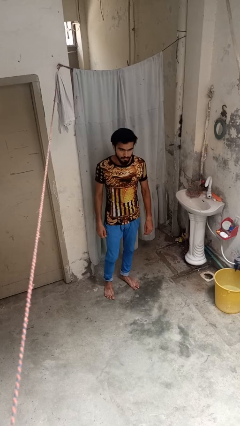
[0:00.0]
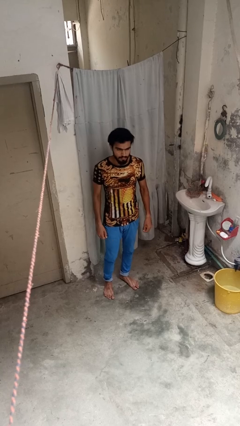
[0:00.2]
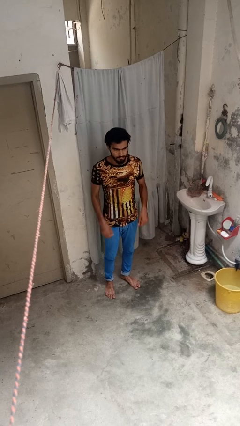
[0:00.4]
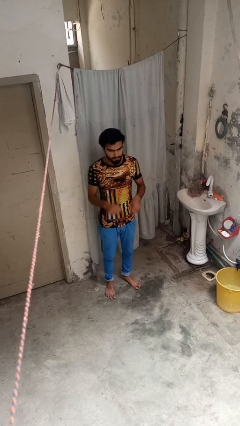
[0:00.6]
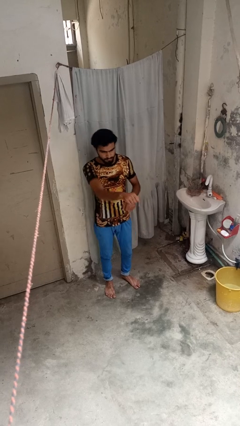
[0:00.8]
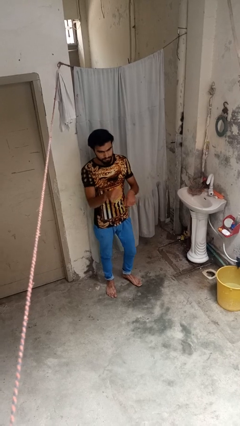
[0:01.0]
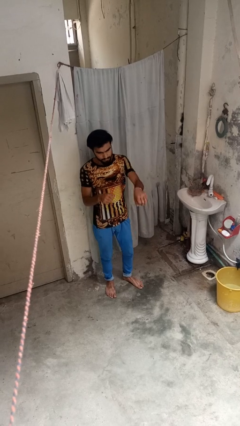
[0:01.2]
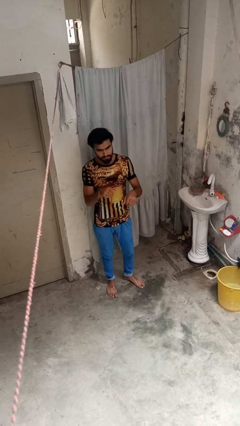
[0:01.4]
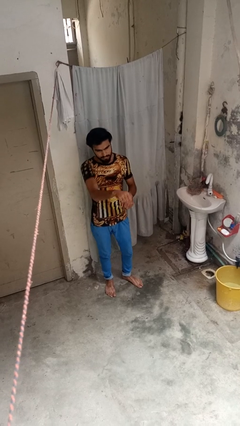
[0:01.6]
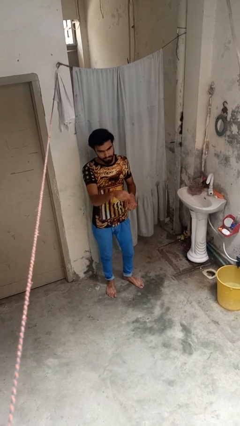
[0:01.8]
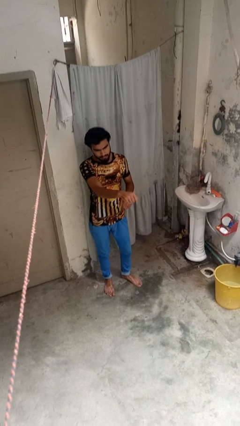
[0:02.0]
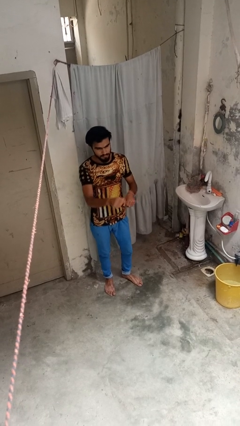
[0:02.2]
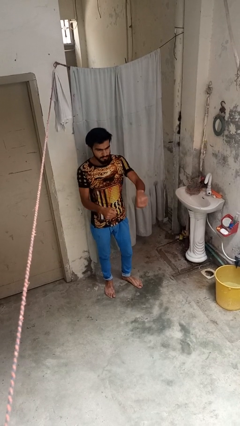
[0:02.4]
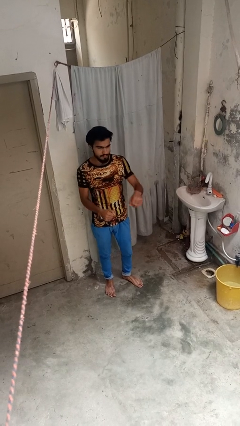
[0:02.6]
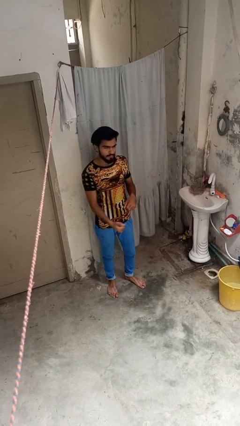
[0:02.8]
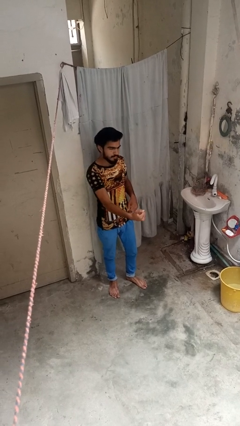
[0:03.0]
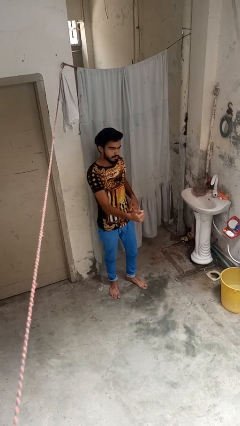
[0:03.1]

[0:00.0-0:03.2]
person punches

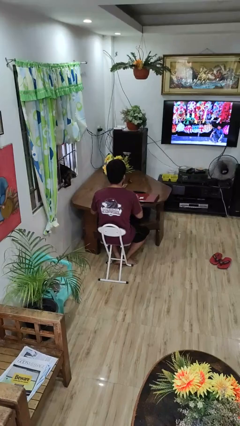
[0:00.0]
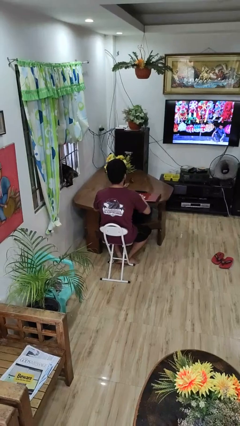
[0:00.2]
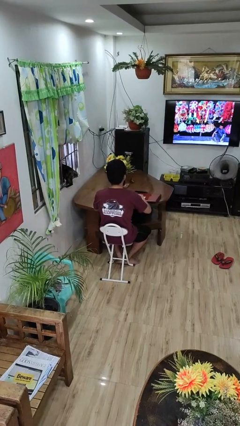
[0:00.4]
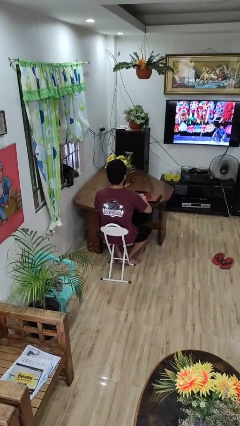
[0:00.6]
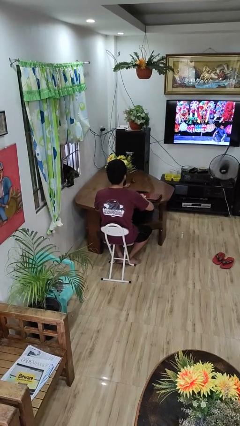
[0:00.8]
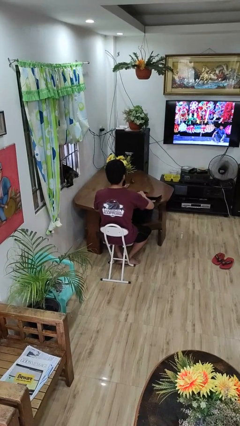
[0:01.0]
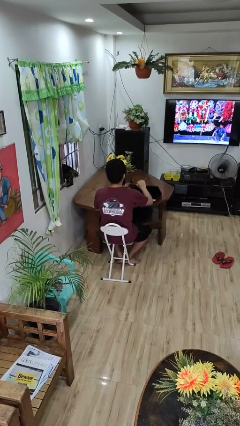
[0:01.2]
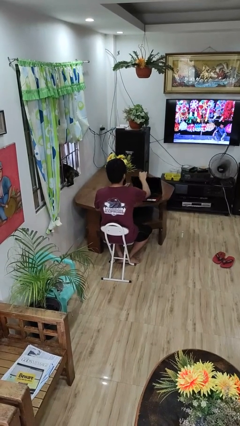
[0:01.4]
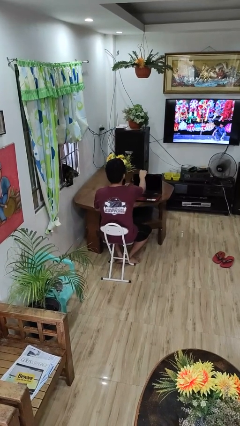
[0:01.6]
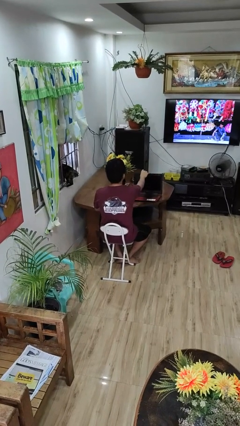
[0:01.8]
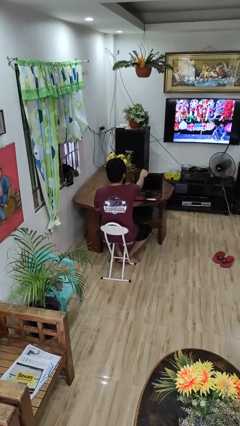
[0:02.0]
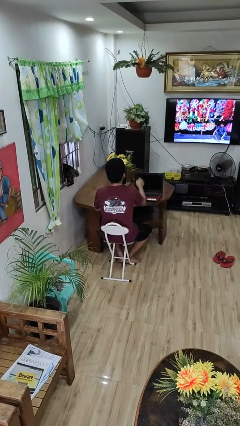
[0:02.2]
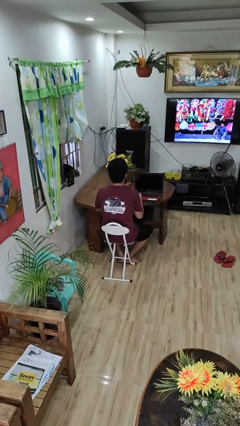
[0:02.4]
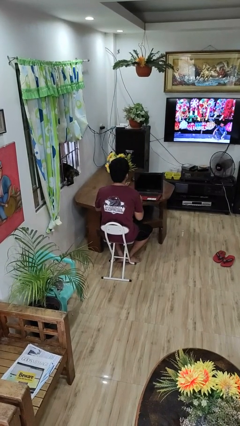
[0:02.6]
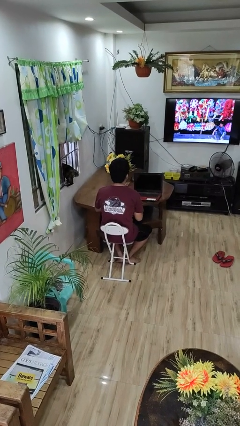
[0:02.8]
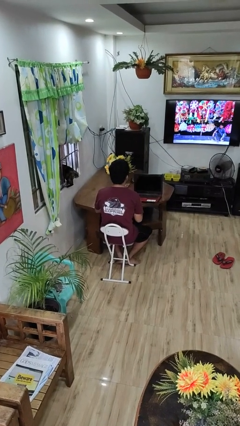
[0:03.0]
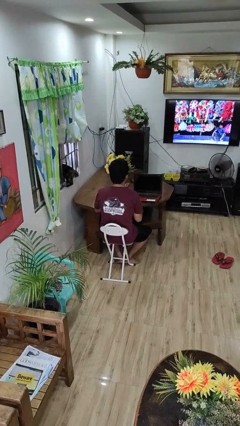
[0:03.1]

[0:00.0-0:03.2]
person opens laptop

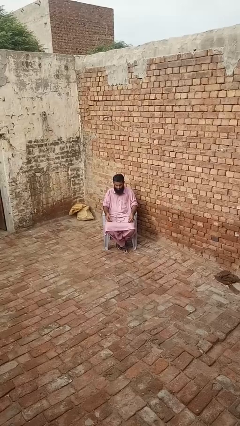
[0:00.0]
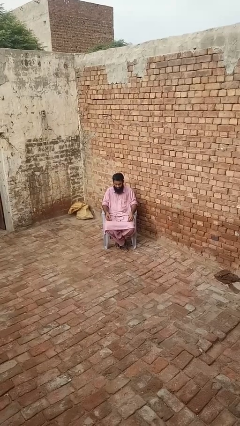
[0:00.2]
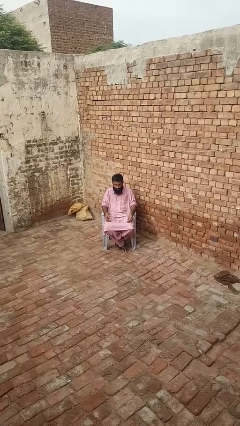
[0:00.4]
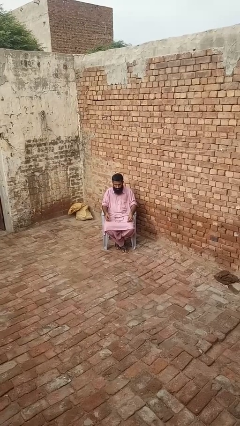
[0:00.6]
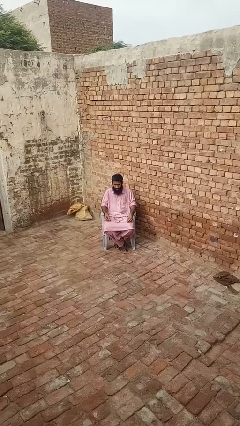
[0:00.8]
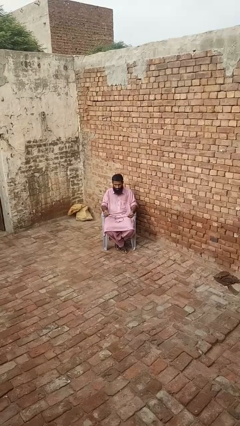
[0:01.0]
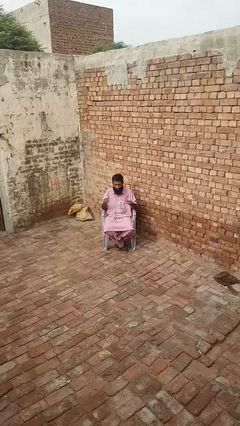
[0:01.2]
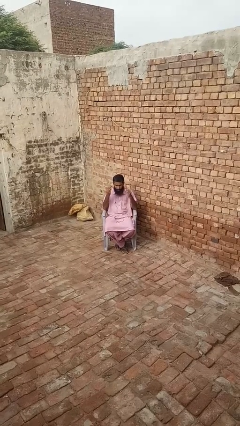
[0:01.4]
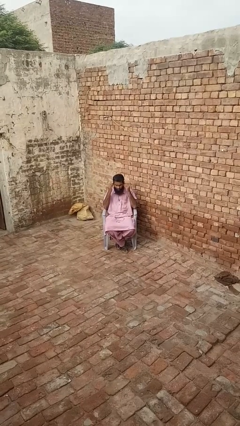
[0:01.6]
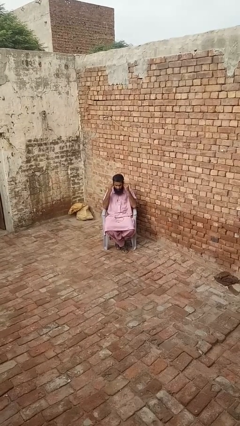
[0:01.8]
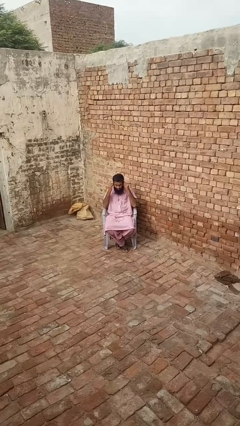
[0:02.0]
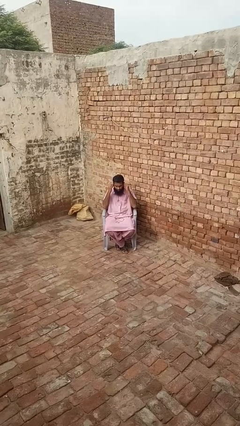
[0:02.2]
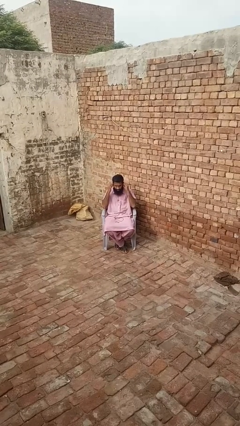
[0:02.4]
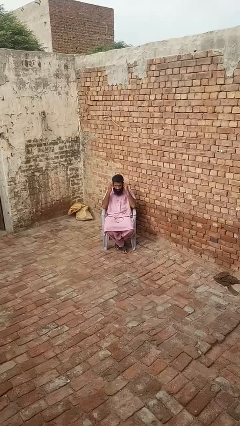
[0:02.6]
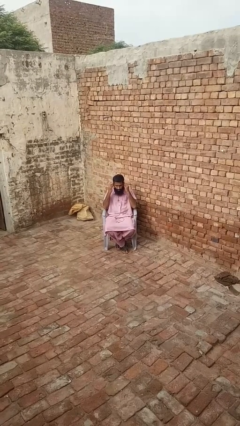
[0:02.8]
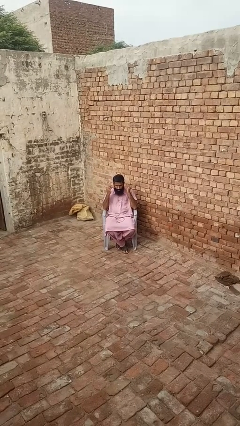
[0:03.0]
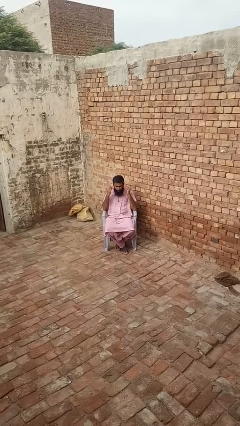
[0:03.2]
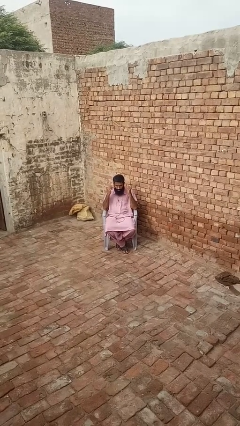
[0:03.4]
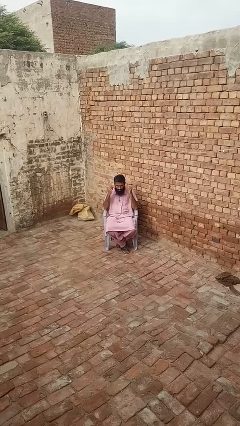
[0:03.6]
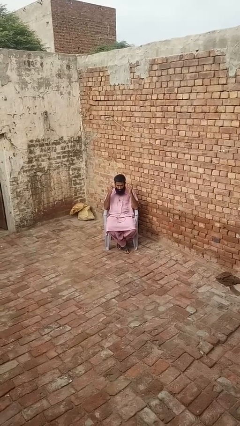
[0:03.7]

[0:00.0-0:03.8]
person puts on headphones

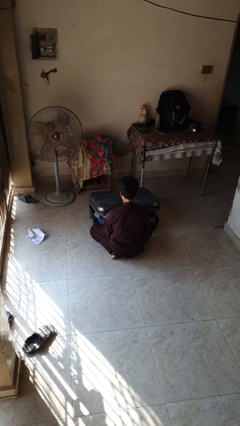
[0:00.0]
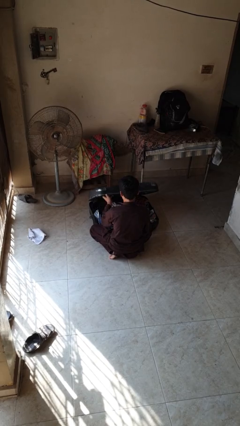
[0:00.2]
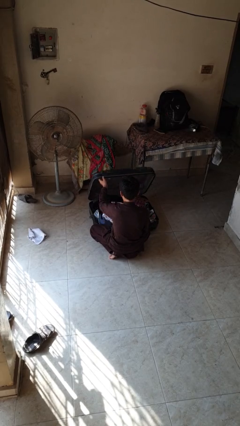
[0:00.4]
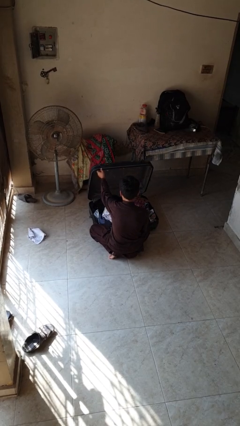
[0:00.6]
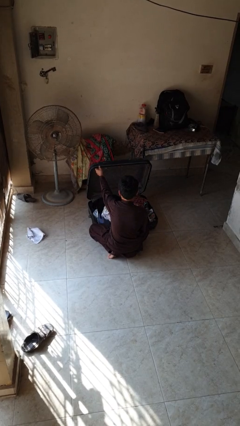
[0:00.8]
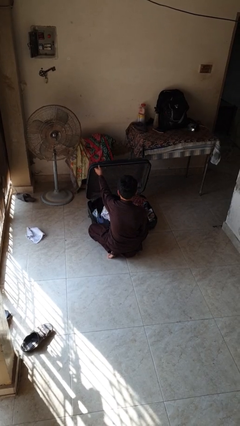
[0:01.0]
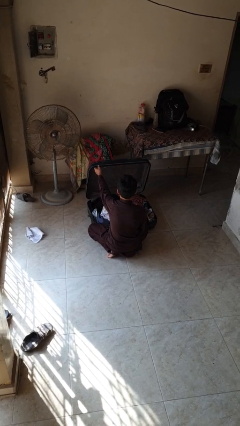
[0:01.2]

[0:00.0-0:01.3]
person opens suitcase

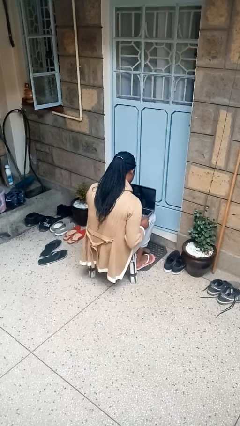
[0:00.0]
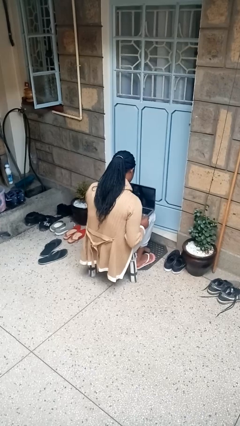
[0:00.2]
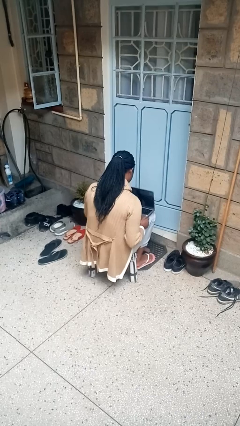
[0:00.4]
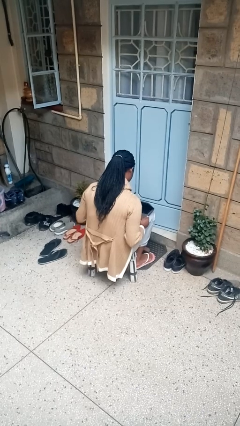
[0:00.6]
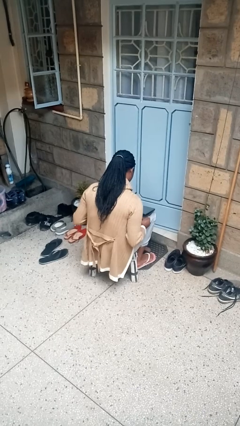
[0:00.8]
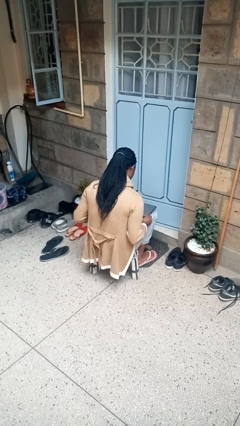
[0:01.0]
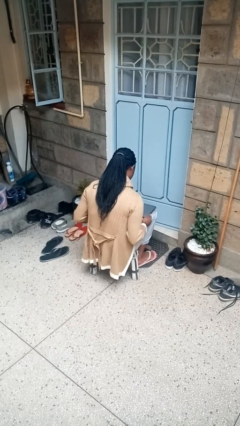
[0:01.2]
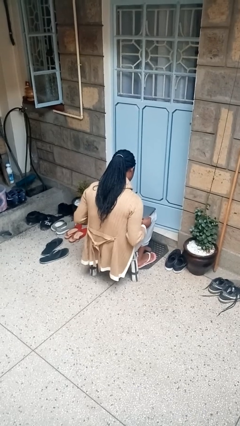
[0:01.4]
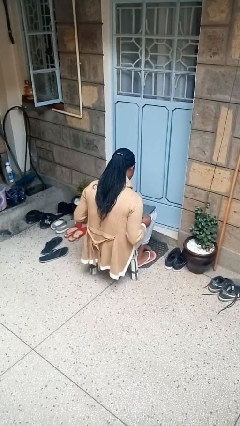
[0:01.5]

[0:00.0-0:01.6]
person closes laptop

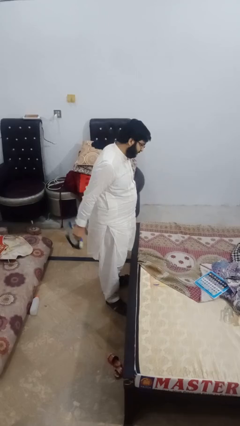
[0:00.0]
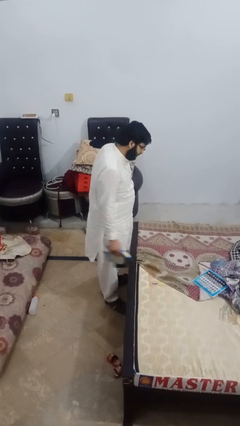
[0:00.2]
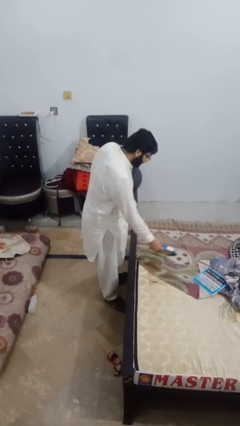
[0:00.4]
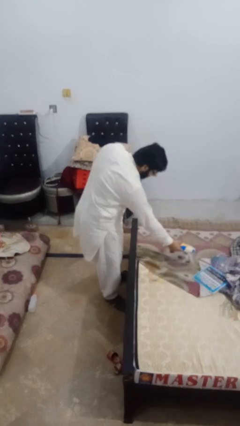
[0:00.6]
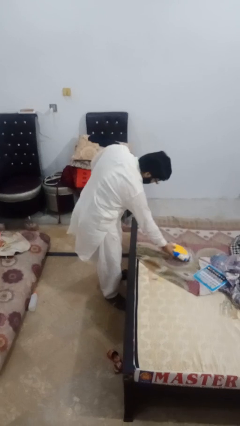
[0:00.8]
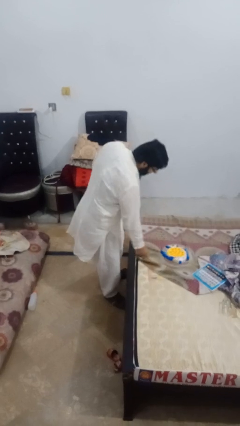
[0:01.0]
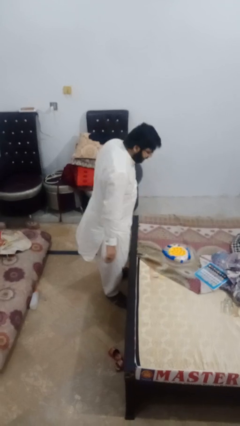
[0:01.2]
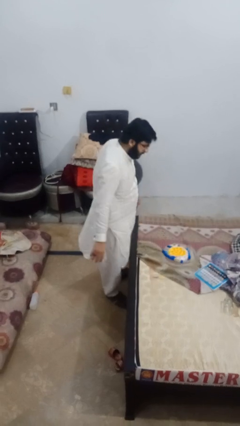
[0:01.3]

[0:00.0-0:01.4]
person puts down object on bed

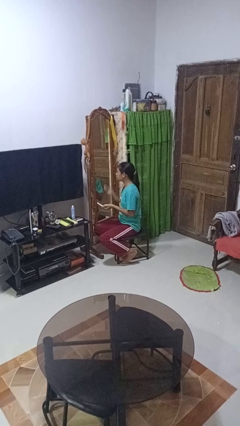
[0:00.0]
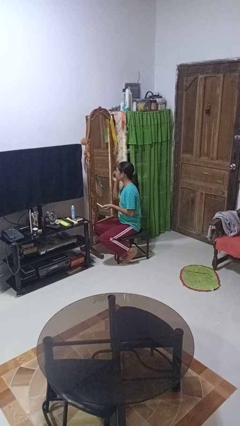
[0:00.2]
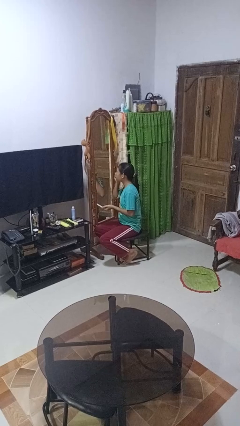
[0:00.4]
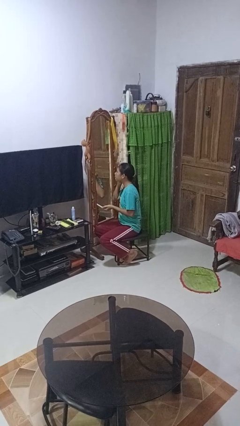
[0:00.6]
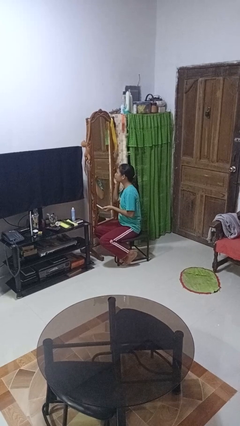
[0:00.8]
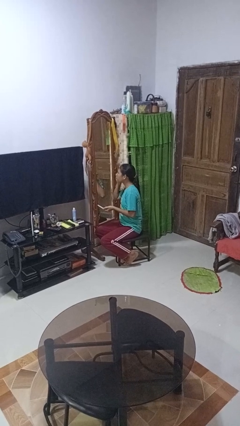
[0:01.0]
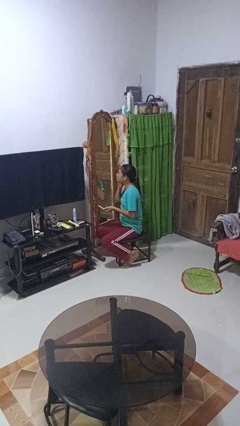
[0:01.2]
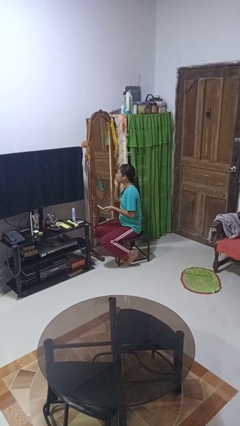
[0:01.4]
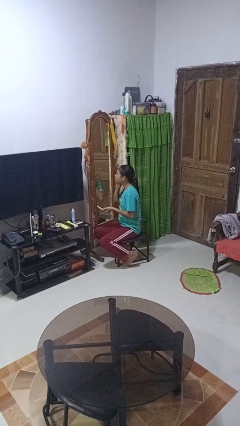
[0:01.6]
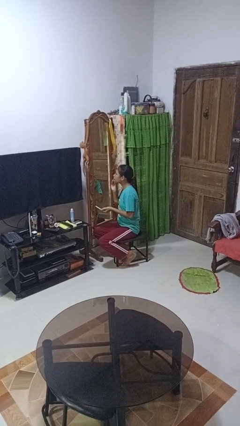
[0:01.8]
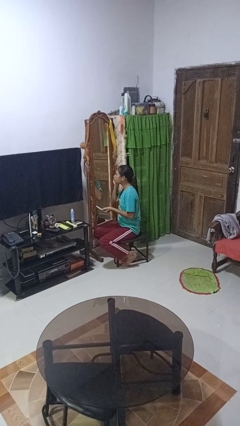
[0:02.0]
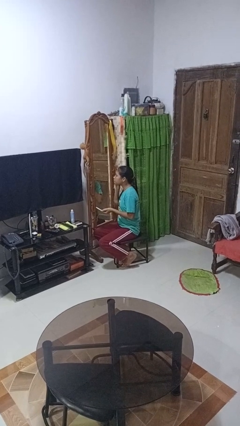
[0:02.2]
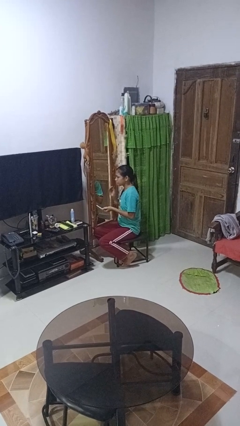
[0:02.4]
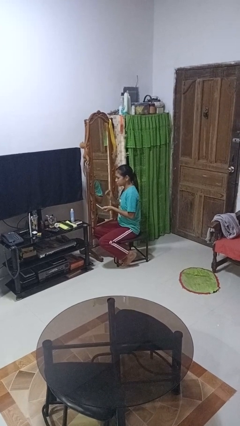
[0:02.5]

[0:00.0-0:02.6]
person applies foundation makeup
